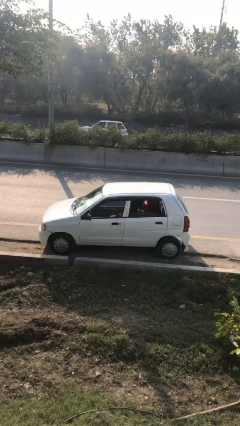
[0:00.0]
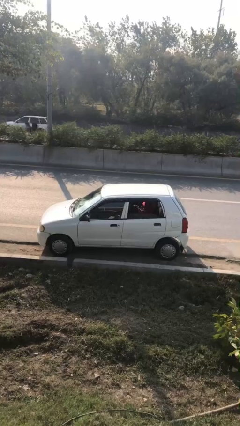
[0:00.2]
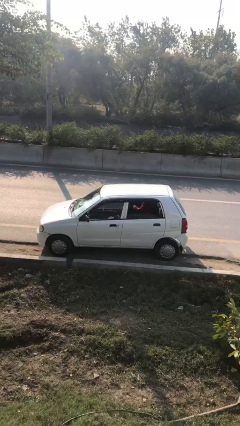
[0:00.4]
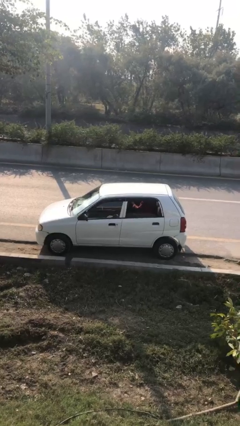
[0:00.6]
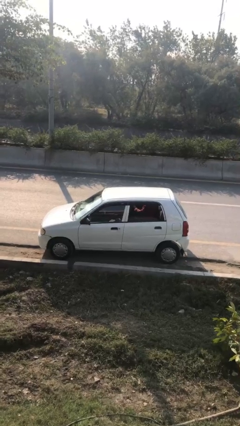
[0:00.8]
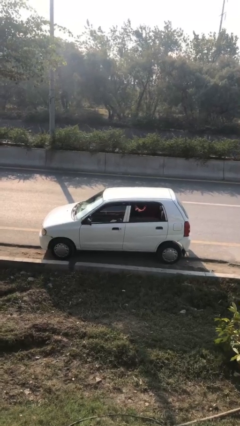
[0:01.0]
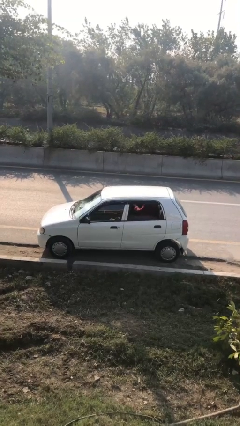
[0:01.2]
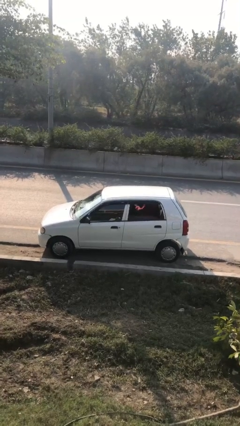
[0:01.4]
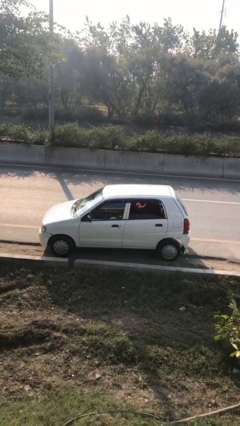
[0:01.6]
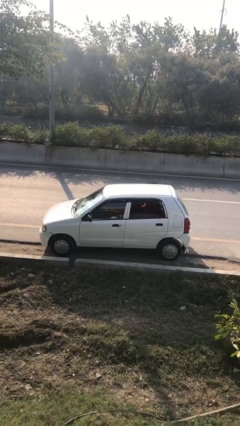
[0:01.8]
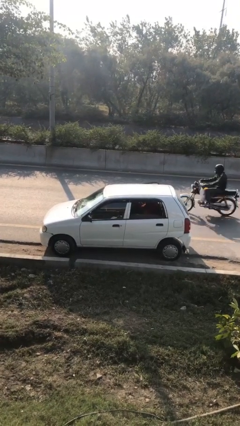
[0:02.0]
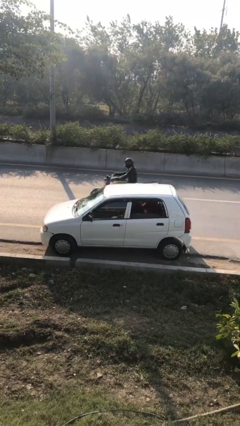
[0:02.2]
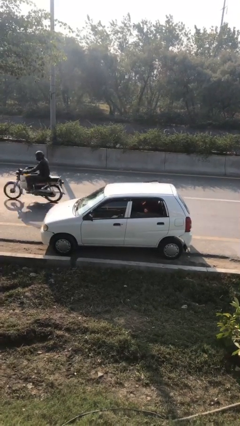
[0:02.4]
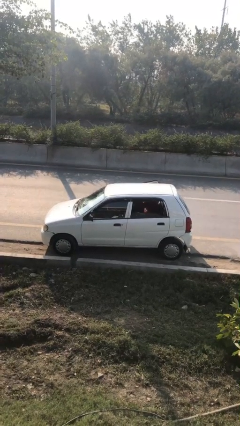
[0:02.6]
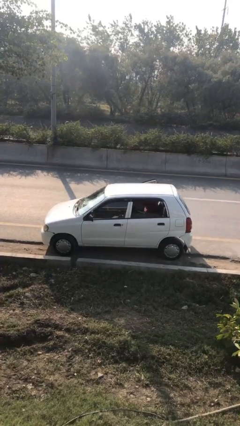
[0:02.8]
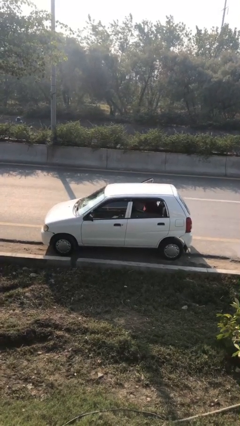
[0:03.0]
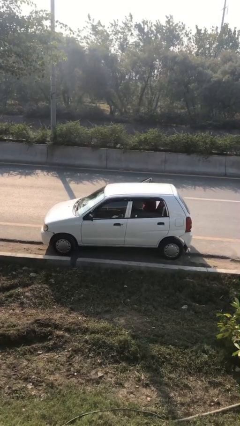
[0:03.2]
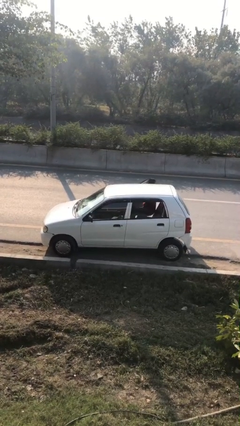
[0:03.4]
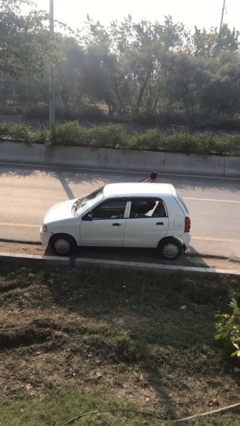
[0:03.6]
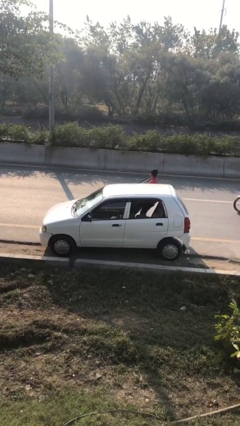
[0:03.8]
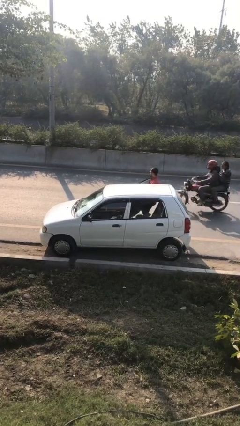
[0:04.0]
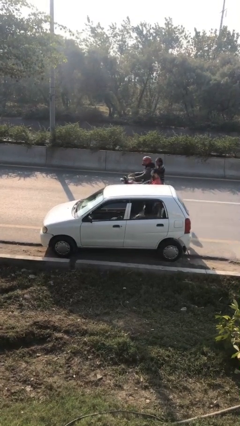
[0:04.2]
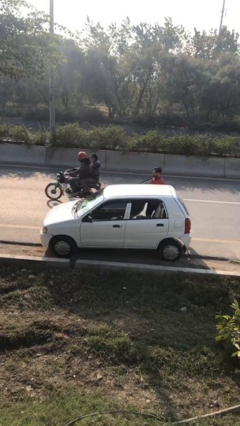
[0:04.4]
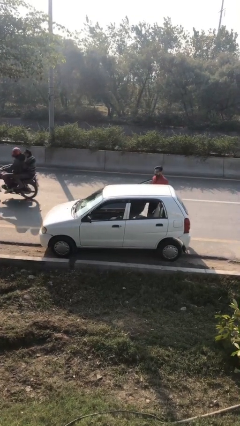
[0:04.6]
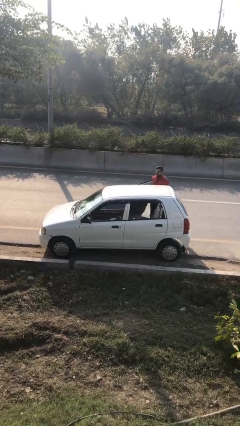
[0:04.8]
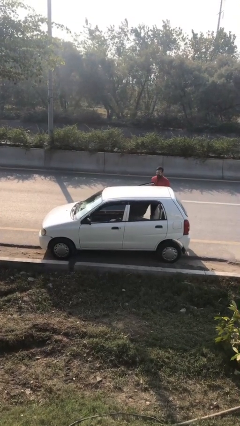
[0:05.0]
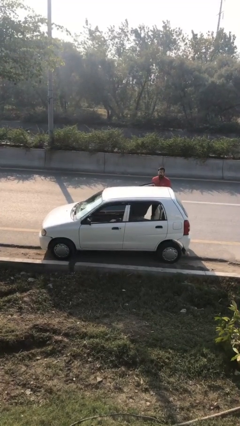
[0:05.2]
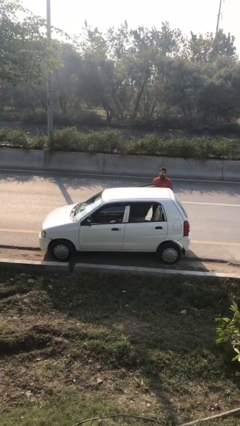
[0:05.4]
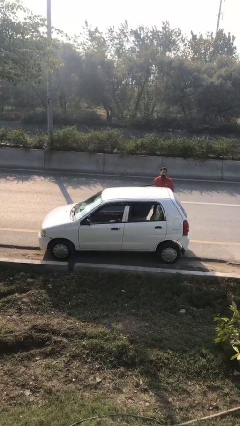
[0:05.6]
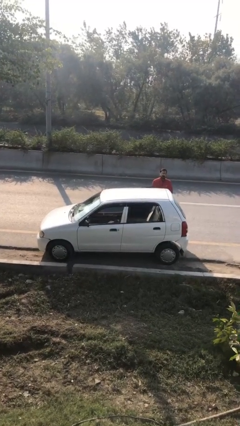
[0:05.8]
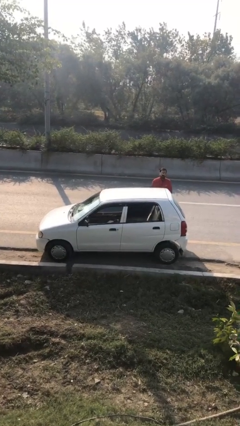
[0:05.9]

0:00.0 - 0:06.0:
car drops off person

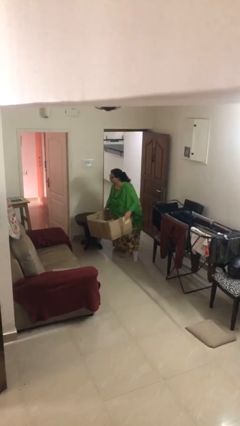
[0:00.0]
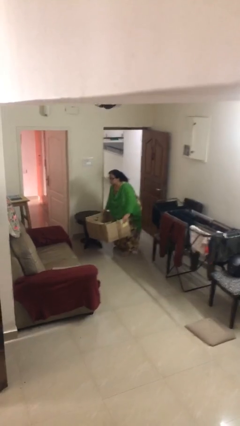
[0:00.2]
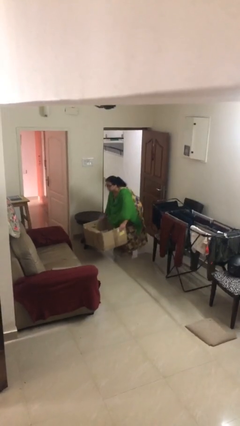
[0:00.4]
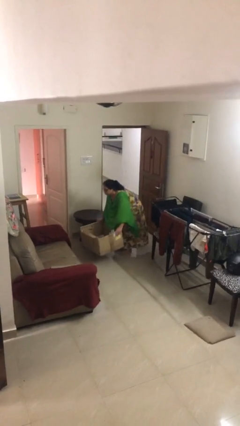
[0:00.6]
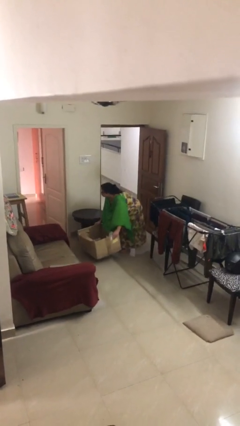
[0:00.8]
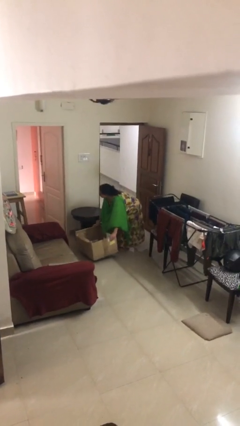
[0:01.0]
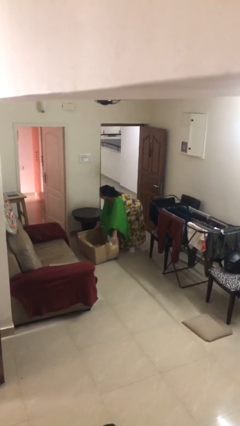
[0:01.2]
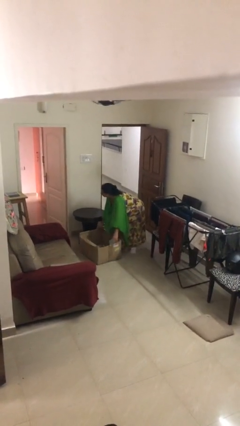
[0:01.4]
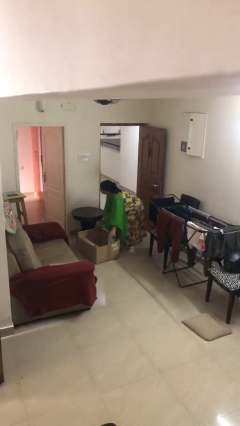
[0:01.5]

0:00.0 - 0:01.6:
person puts down object on floor

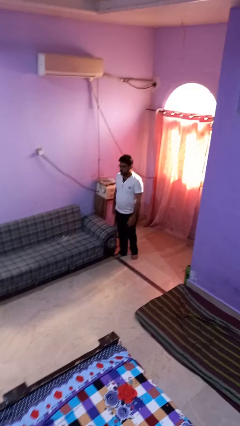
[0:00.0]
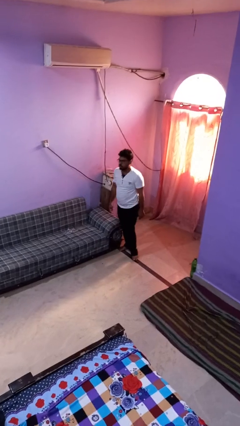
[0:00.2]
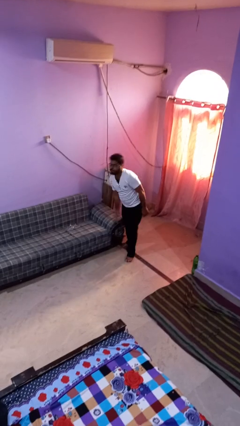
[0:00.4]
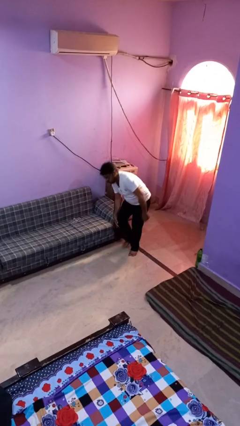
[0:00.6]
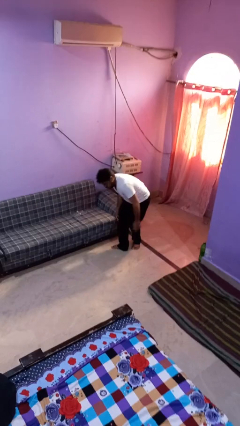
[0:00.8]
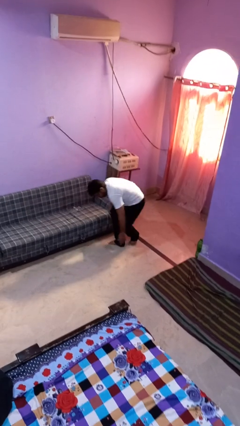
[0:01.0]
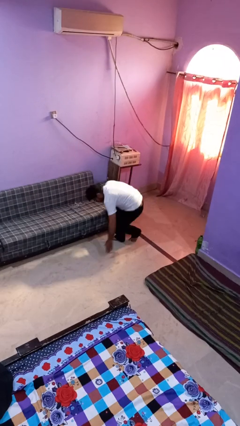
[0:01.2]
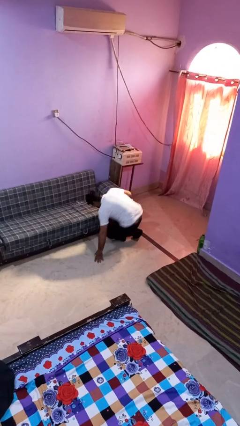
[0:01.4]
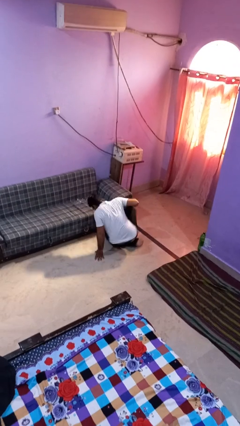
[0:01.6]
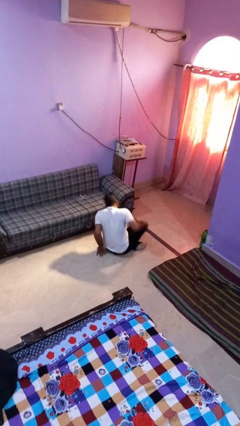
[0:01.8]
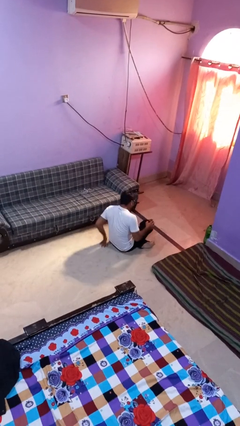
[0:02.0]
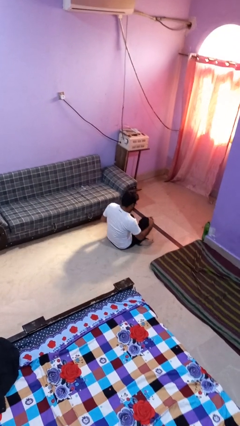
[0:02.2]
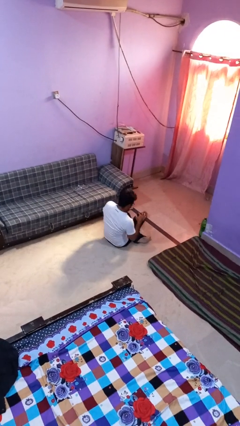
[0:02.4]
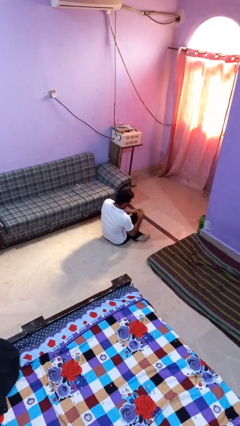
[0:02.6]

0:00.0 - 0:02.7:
person trips on object on floor

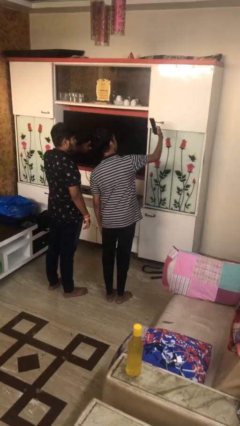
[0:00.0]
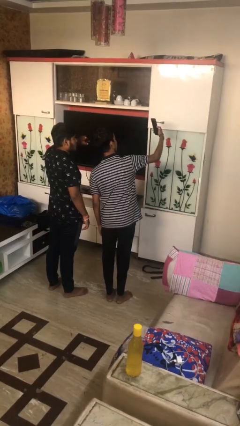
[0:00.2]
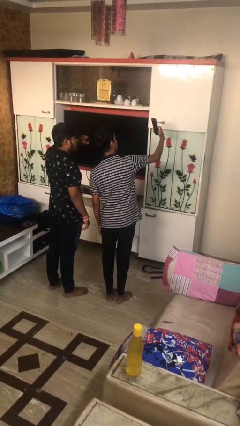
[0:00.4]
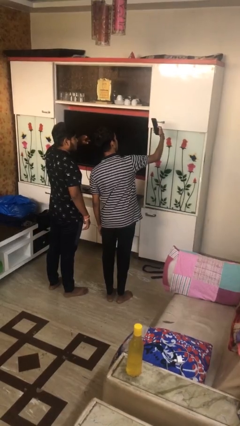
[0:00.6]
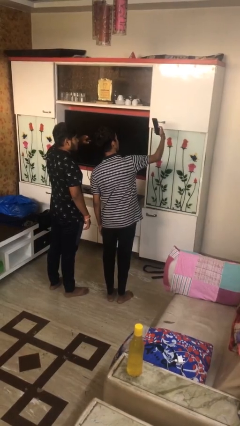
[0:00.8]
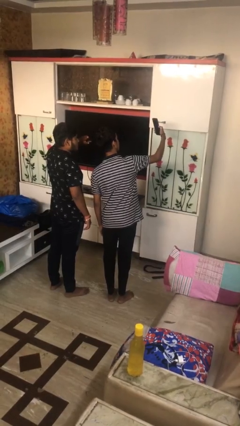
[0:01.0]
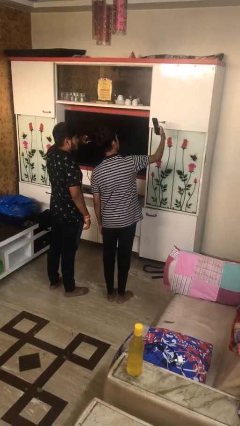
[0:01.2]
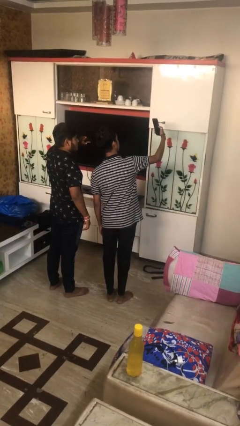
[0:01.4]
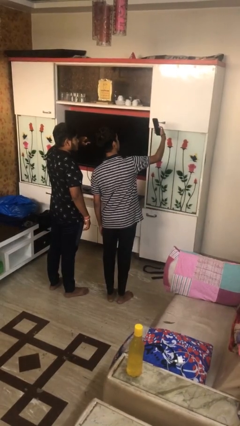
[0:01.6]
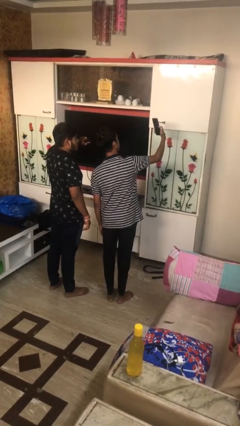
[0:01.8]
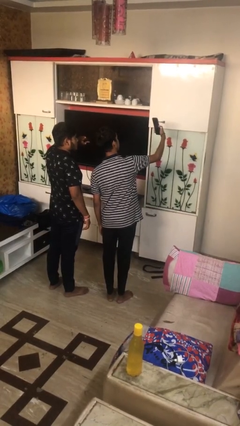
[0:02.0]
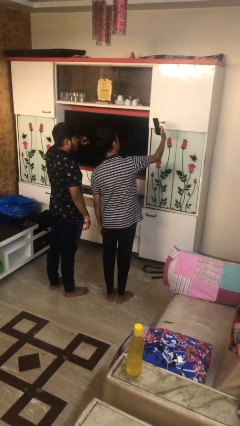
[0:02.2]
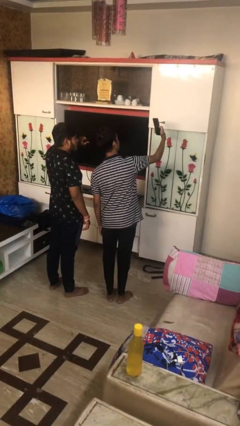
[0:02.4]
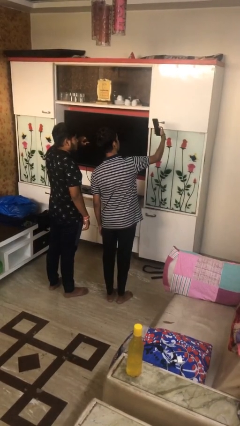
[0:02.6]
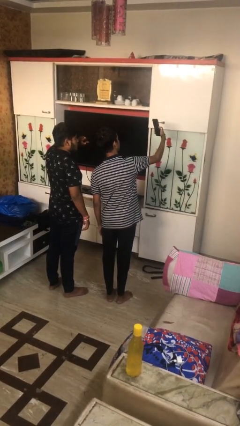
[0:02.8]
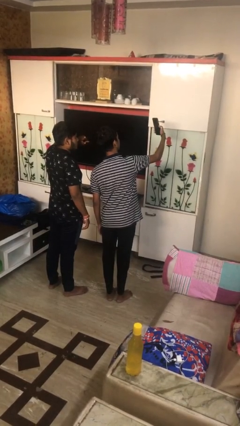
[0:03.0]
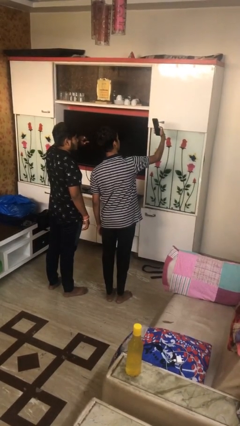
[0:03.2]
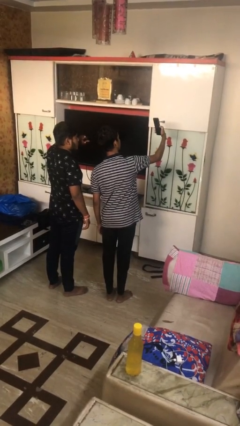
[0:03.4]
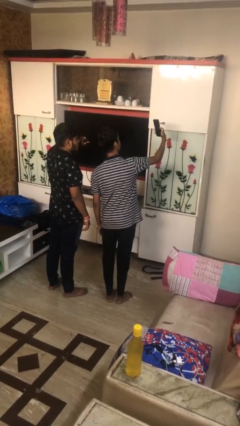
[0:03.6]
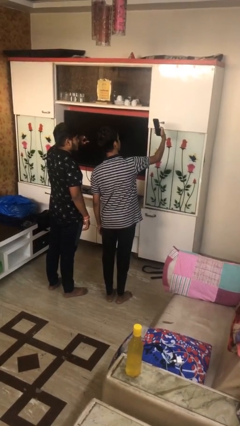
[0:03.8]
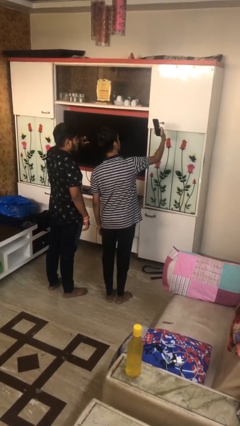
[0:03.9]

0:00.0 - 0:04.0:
person takes selfie with person

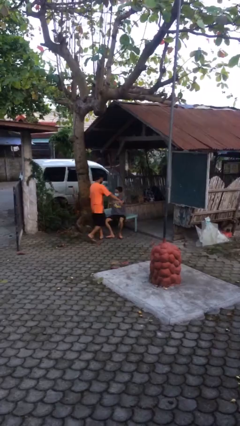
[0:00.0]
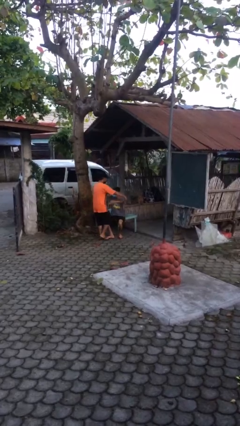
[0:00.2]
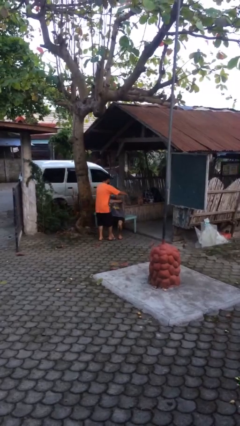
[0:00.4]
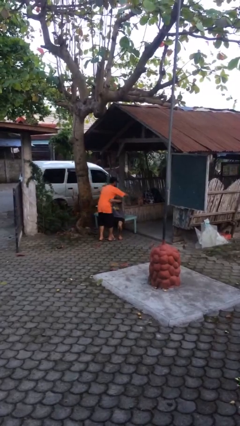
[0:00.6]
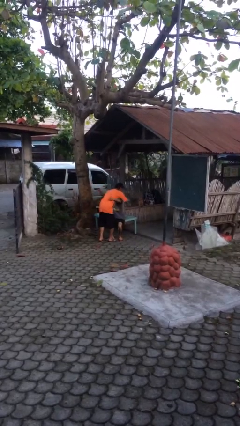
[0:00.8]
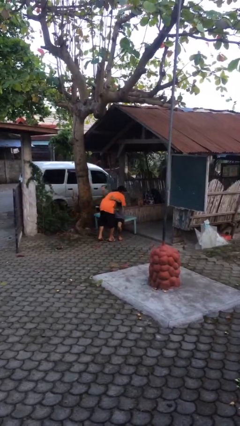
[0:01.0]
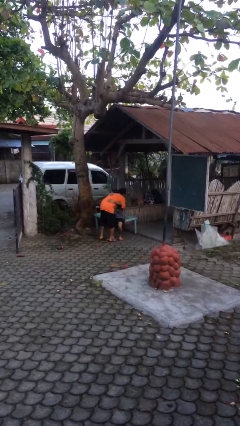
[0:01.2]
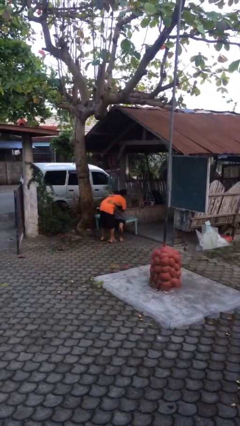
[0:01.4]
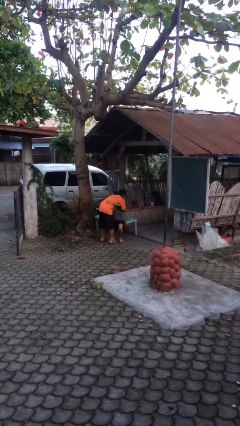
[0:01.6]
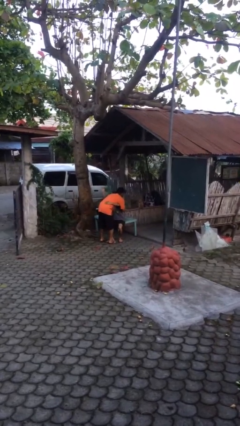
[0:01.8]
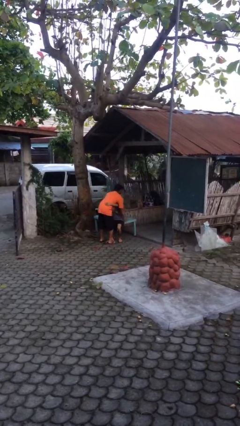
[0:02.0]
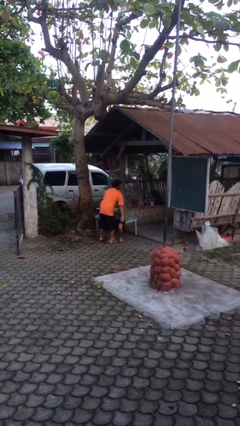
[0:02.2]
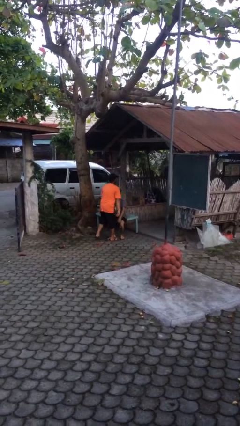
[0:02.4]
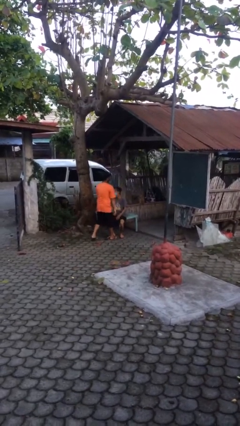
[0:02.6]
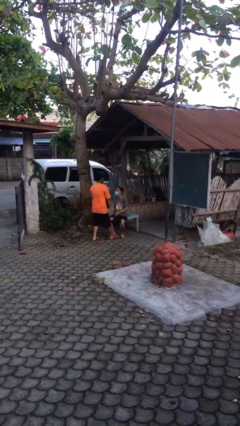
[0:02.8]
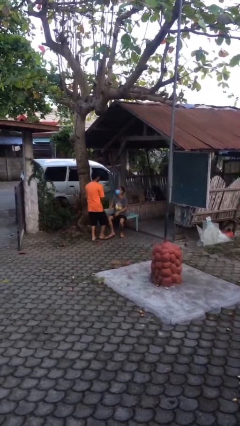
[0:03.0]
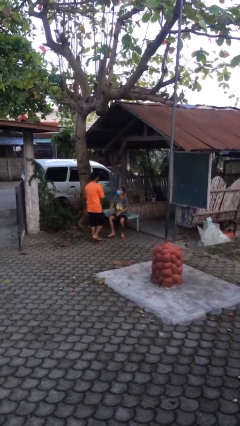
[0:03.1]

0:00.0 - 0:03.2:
person embraces person

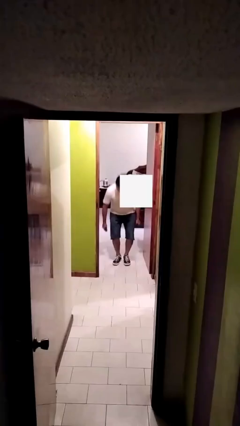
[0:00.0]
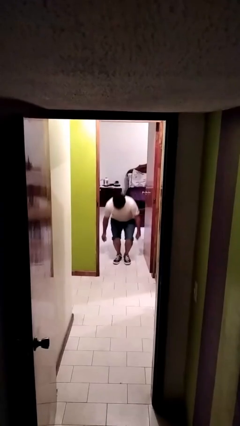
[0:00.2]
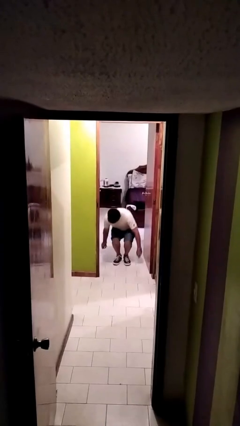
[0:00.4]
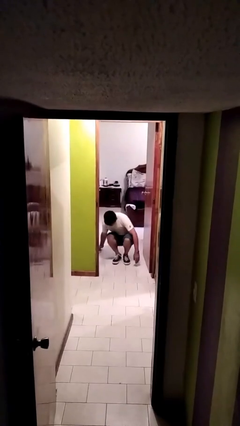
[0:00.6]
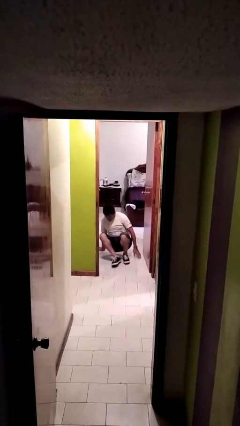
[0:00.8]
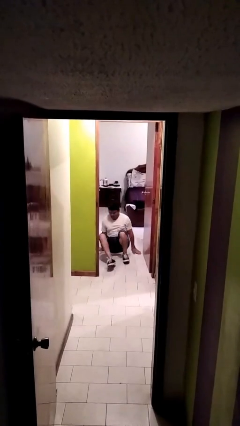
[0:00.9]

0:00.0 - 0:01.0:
person sits down
